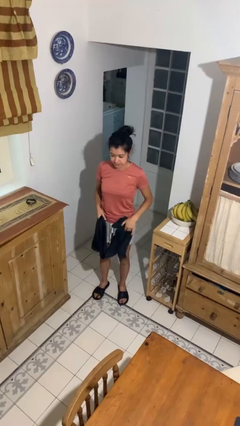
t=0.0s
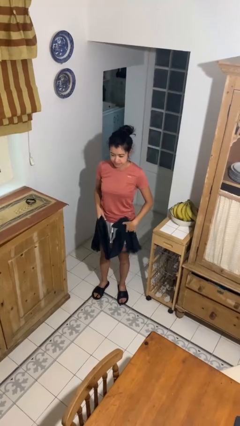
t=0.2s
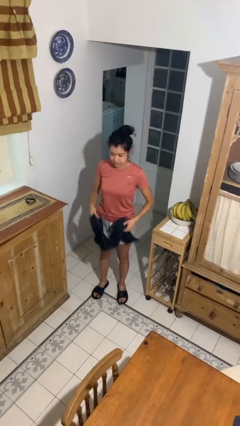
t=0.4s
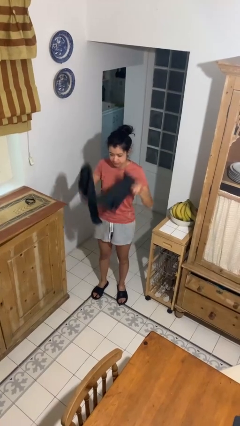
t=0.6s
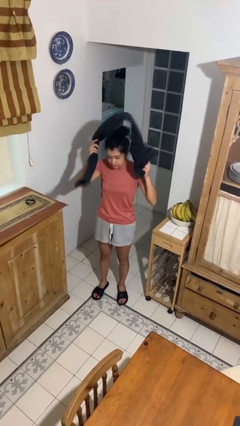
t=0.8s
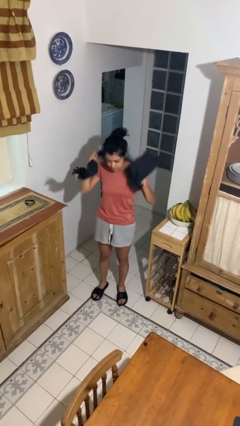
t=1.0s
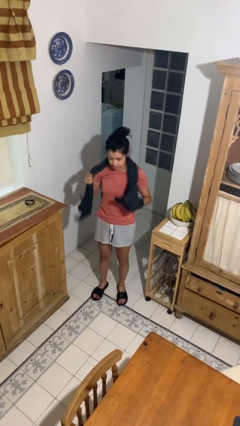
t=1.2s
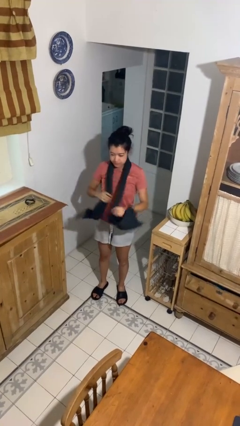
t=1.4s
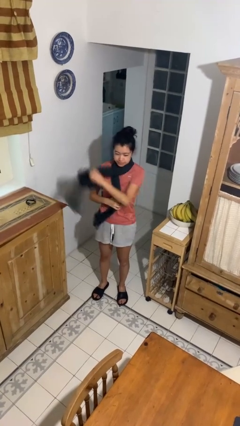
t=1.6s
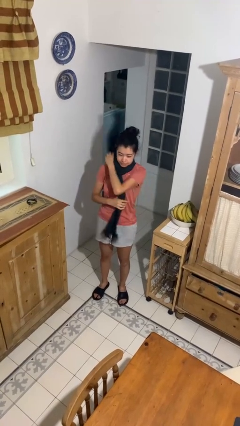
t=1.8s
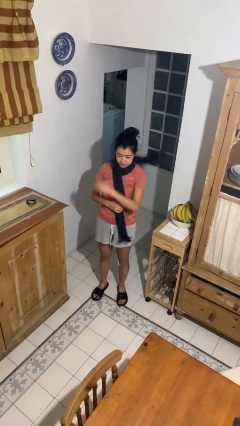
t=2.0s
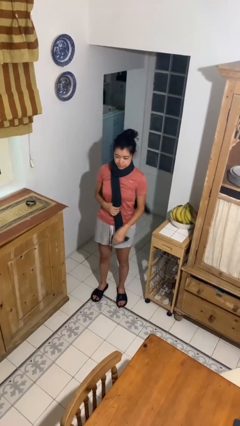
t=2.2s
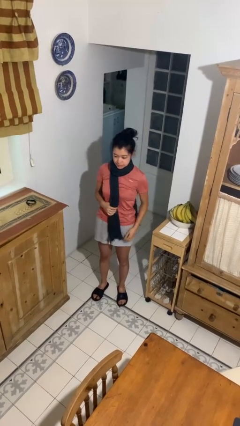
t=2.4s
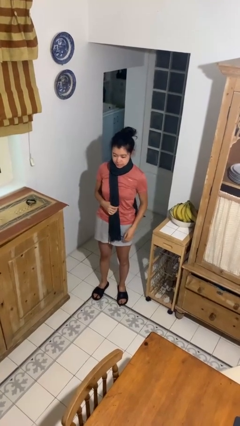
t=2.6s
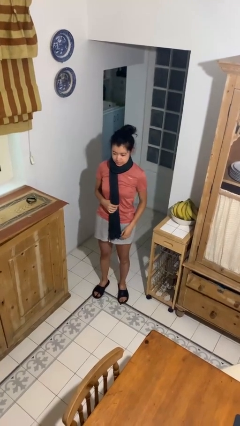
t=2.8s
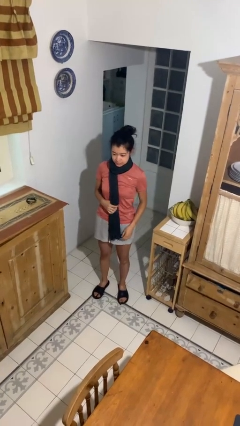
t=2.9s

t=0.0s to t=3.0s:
person puts on scarf

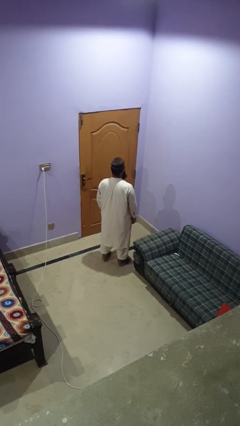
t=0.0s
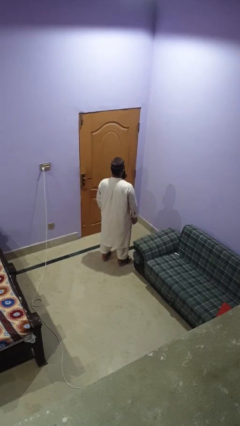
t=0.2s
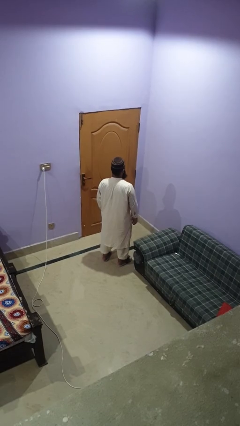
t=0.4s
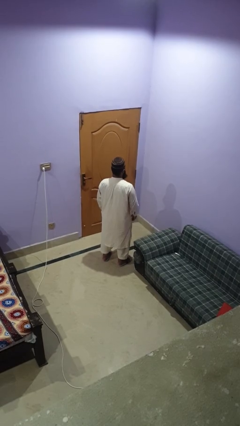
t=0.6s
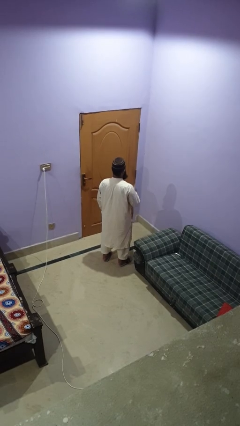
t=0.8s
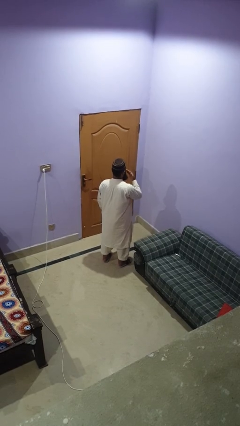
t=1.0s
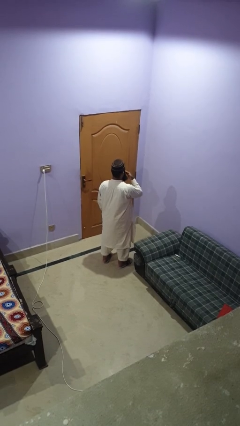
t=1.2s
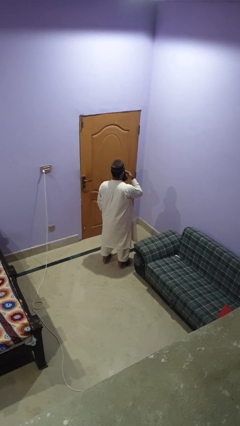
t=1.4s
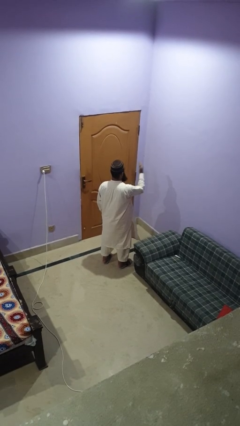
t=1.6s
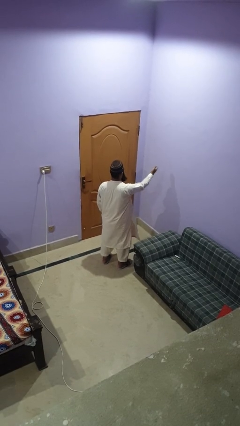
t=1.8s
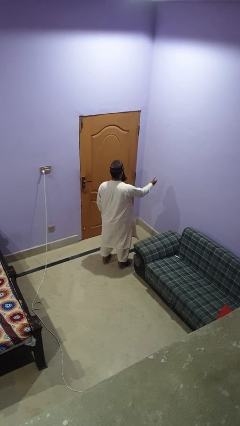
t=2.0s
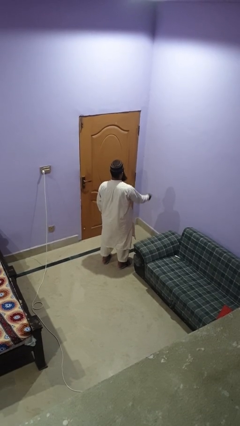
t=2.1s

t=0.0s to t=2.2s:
person gestures blow kiss

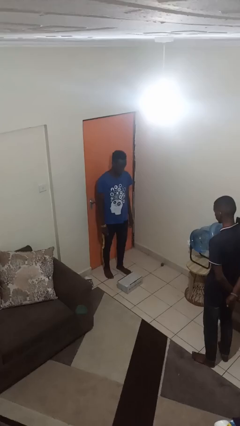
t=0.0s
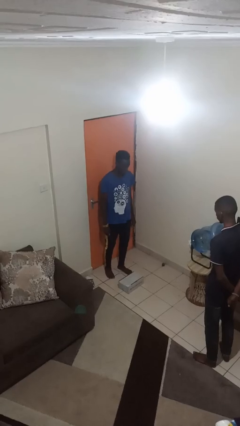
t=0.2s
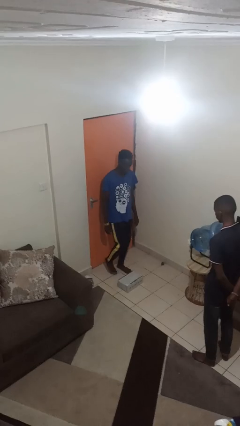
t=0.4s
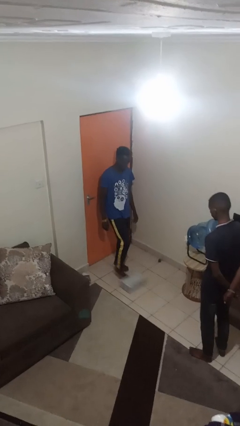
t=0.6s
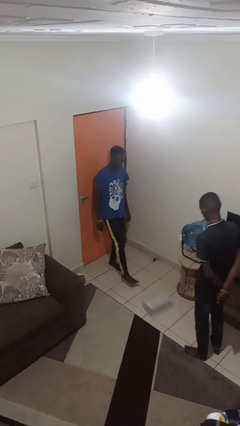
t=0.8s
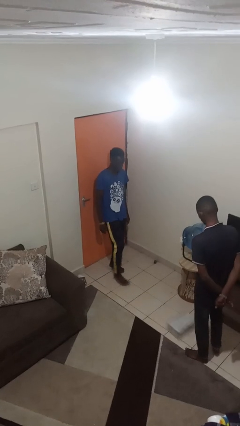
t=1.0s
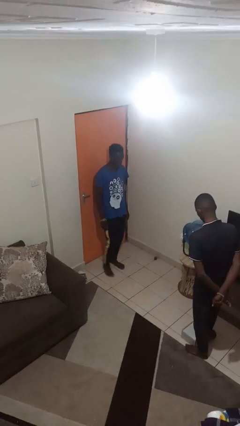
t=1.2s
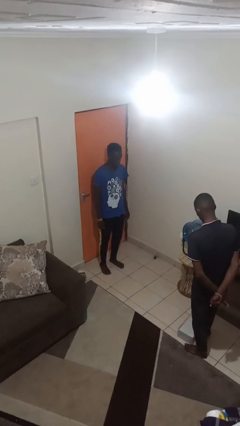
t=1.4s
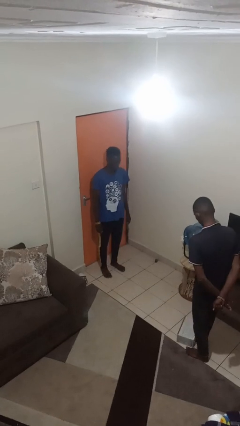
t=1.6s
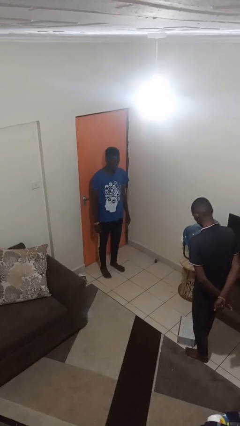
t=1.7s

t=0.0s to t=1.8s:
person kicks object to person

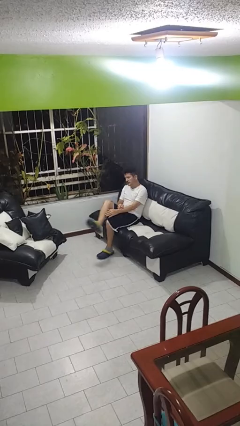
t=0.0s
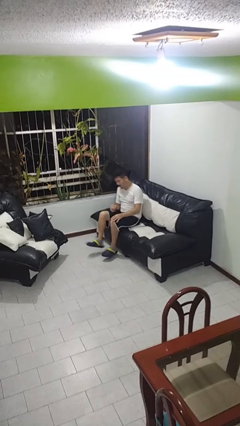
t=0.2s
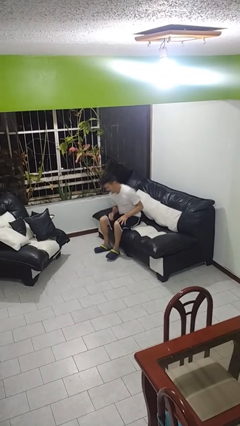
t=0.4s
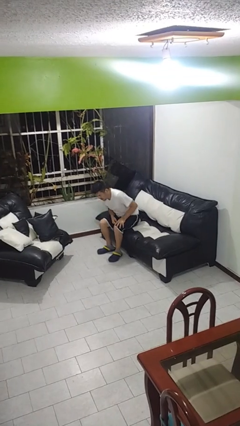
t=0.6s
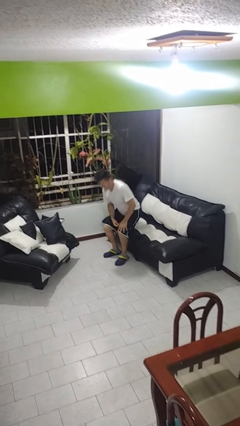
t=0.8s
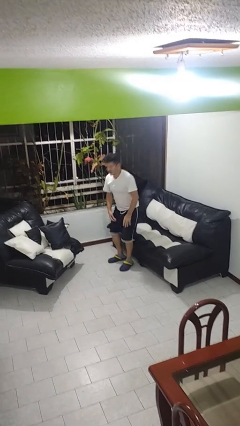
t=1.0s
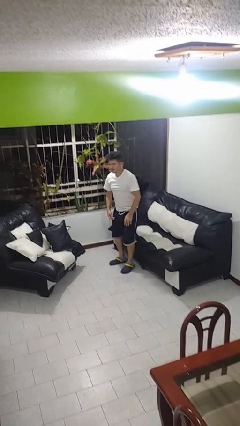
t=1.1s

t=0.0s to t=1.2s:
person stands up

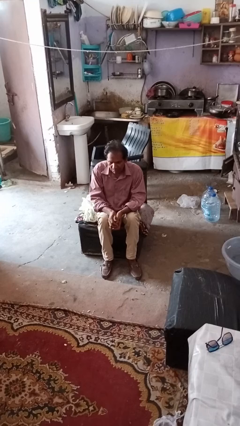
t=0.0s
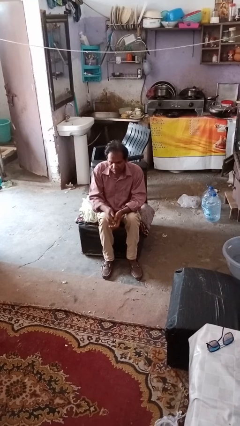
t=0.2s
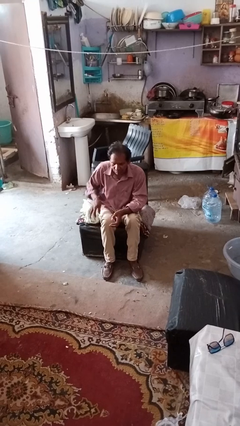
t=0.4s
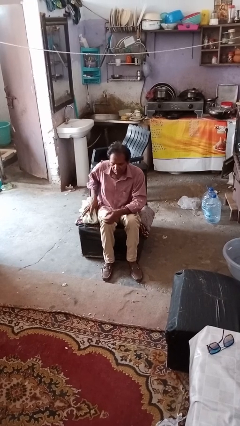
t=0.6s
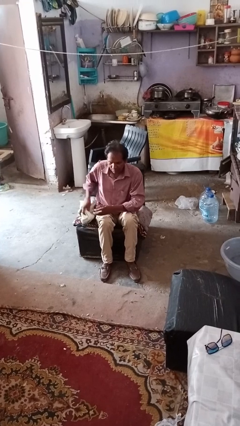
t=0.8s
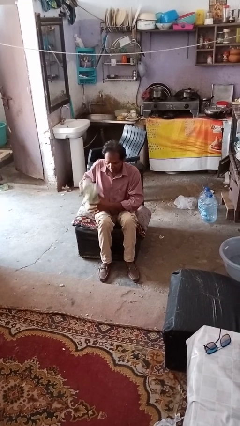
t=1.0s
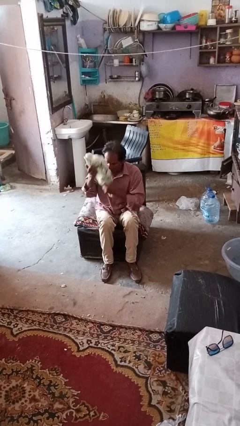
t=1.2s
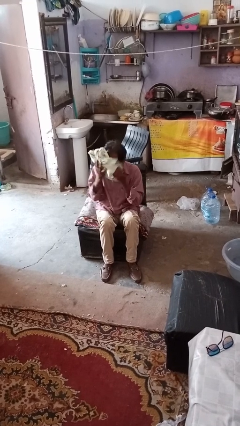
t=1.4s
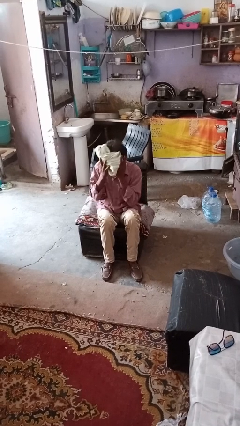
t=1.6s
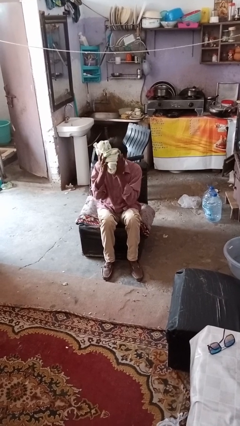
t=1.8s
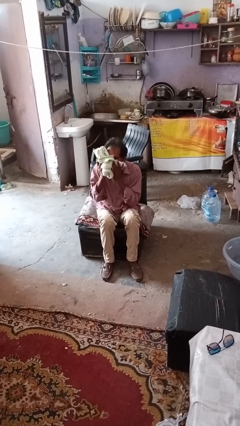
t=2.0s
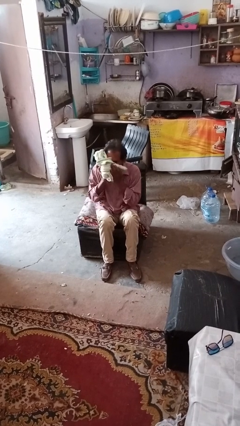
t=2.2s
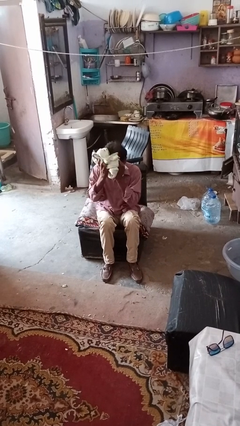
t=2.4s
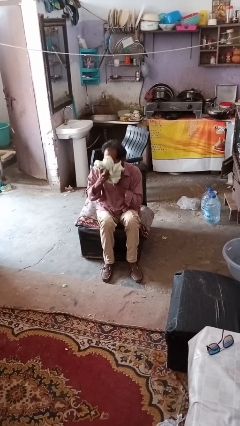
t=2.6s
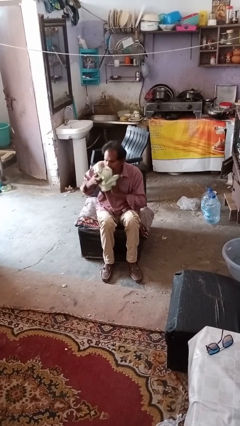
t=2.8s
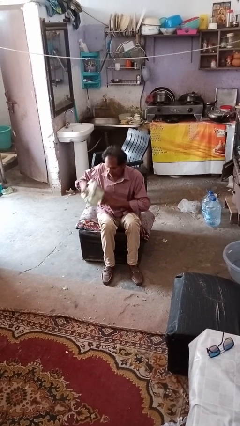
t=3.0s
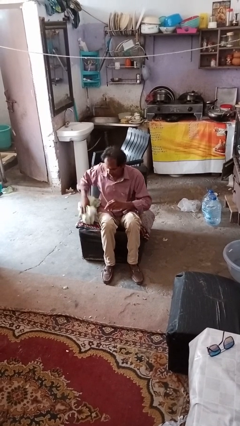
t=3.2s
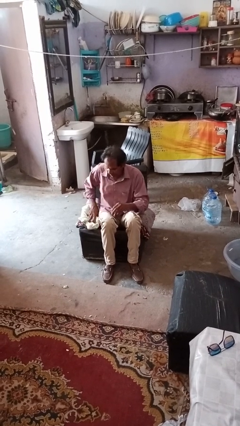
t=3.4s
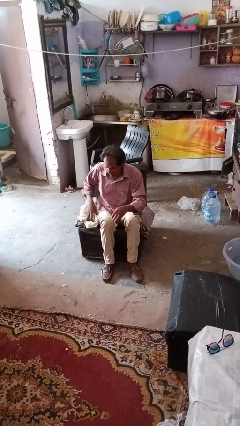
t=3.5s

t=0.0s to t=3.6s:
person wipes mouth with napkin

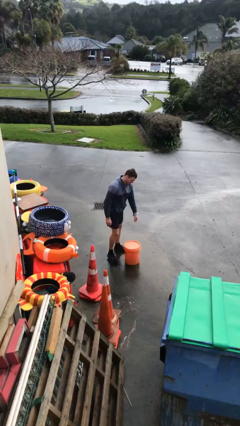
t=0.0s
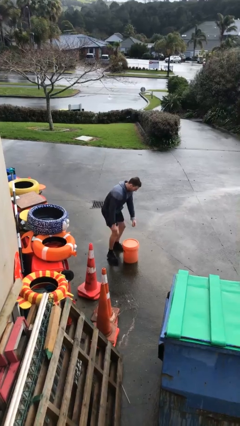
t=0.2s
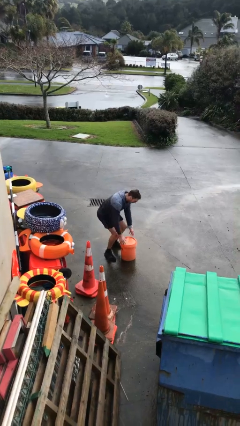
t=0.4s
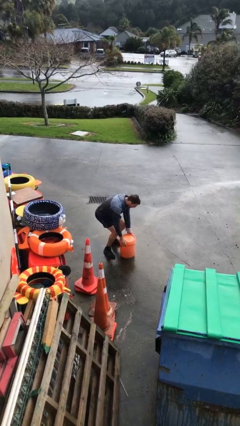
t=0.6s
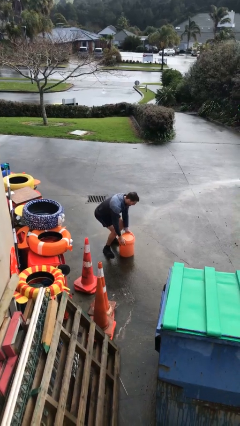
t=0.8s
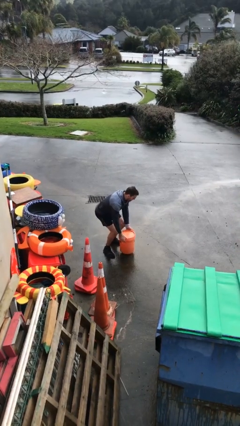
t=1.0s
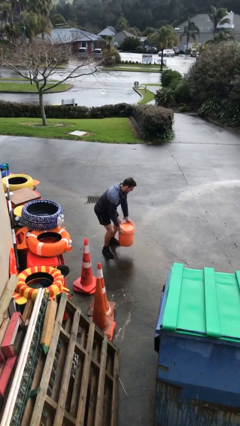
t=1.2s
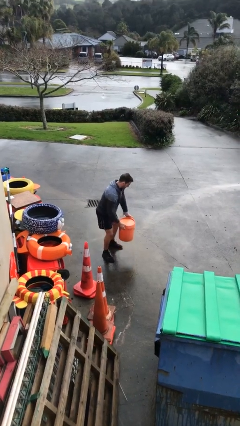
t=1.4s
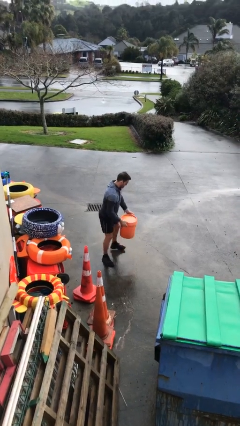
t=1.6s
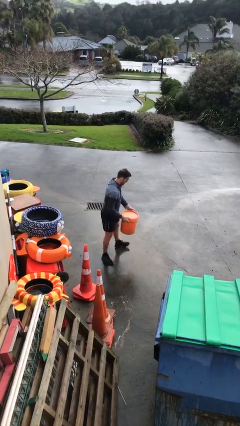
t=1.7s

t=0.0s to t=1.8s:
person picks up object from floor

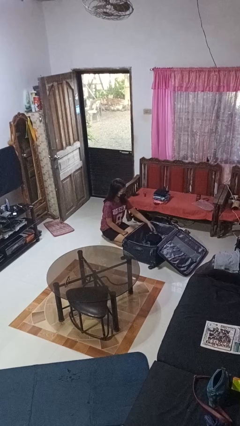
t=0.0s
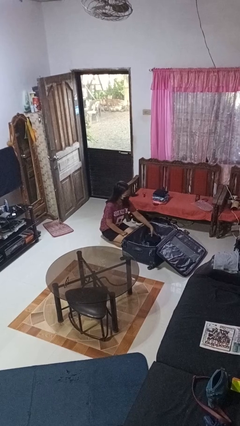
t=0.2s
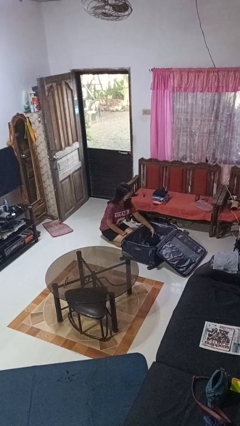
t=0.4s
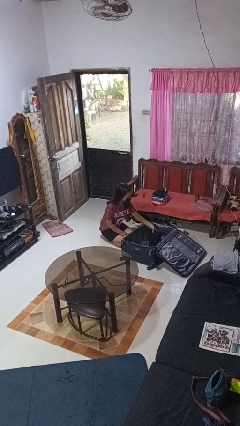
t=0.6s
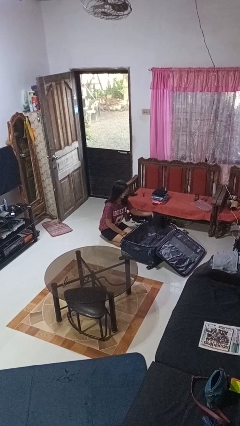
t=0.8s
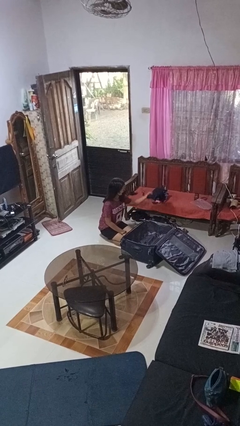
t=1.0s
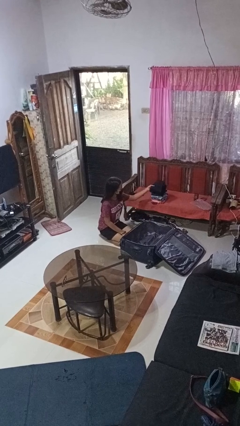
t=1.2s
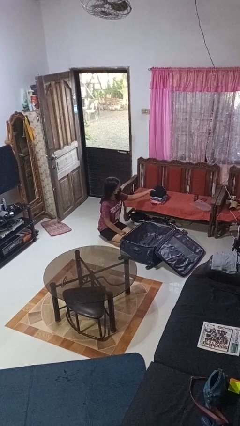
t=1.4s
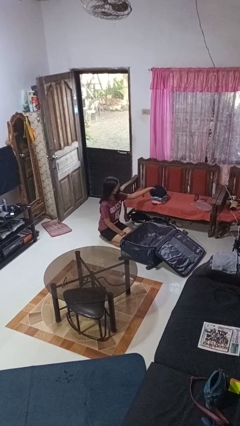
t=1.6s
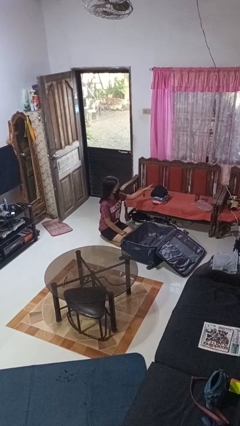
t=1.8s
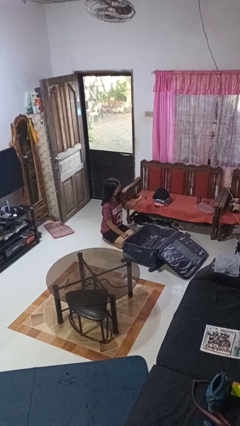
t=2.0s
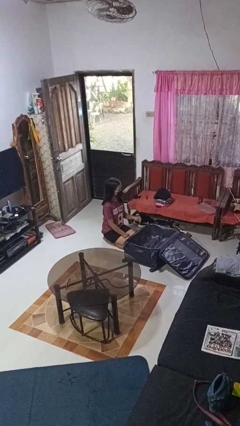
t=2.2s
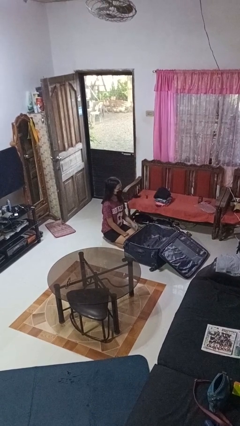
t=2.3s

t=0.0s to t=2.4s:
person unloads clothes from suitcase

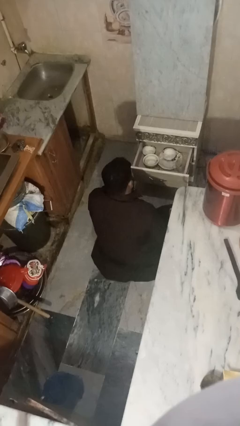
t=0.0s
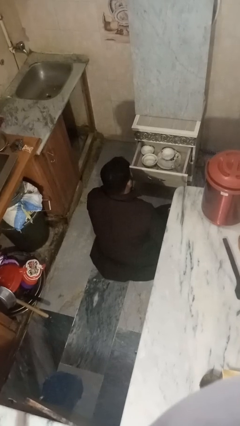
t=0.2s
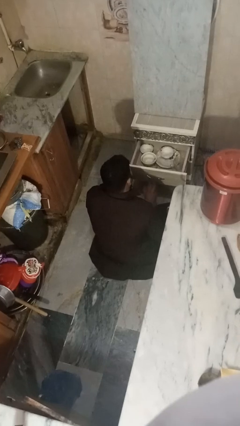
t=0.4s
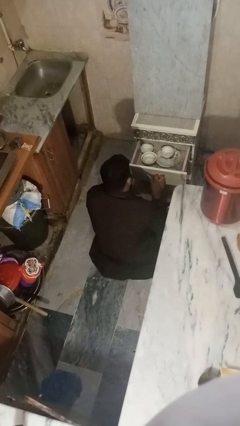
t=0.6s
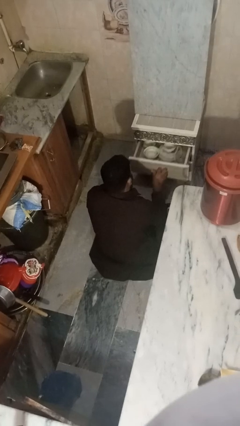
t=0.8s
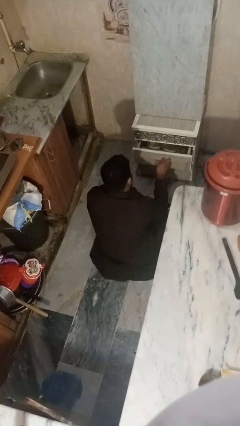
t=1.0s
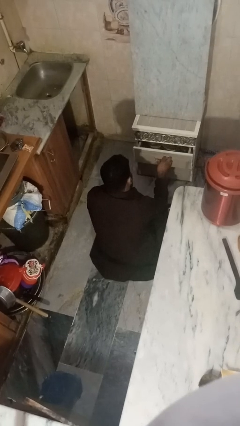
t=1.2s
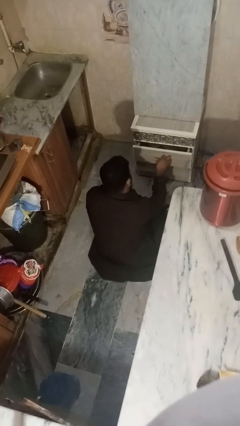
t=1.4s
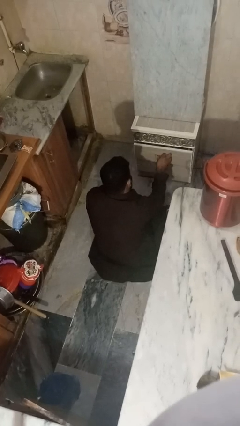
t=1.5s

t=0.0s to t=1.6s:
person closes kitchen drawer
